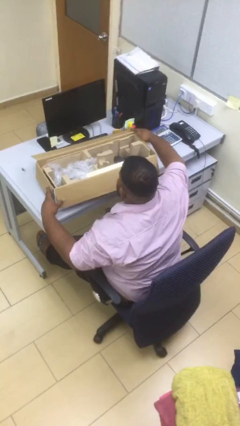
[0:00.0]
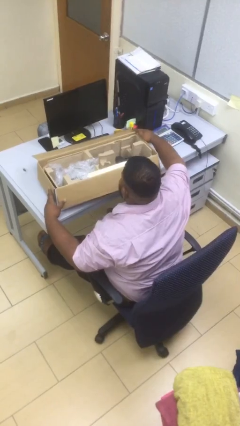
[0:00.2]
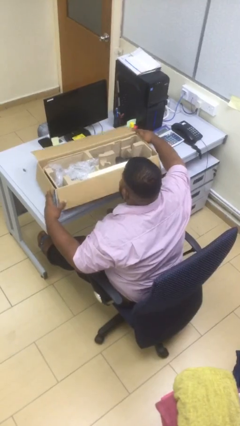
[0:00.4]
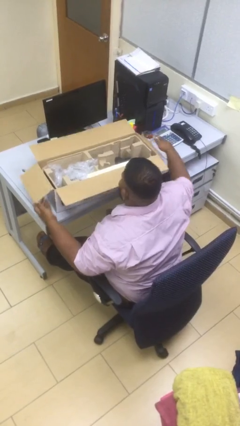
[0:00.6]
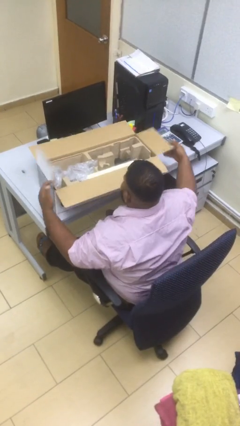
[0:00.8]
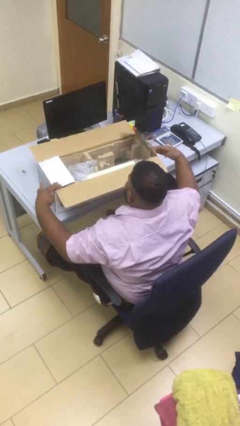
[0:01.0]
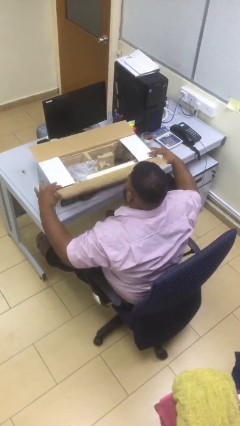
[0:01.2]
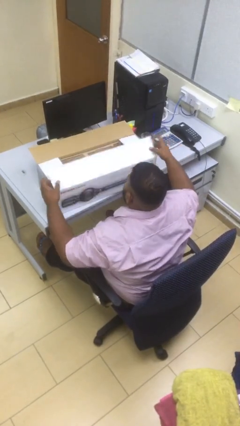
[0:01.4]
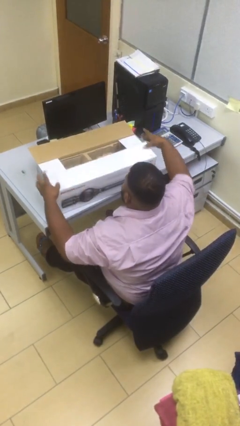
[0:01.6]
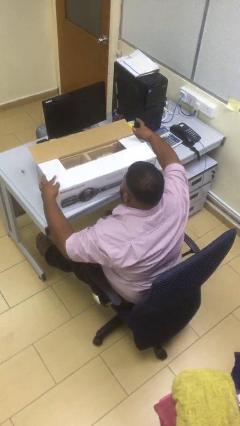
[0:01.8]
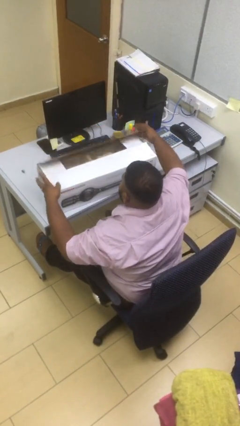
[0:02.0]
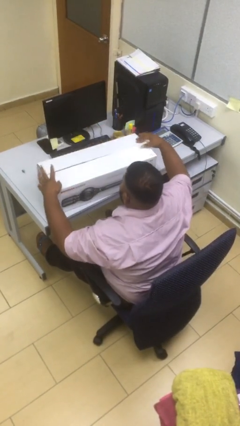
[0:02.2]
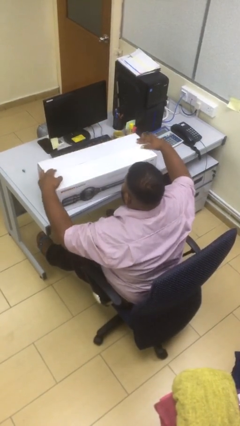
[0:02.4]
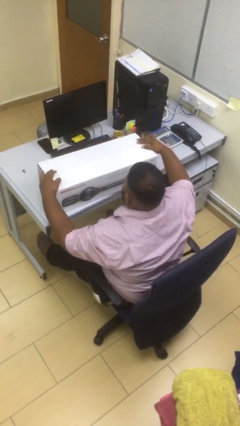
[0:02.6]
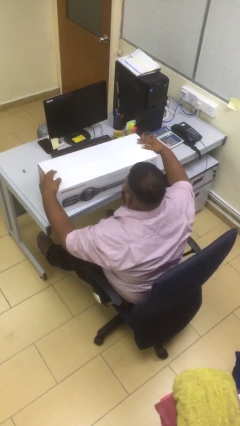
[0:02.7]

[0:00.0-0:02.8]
person closes box

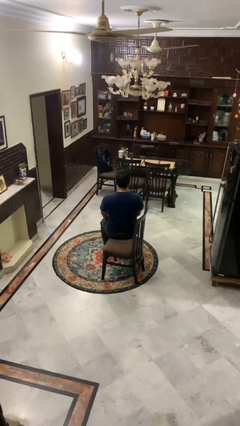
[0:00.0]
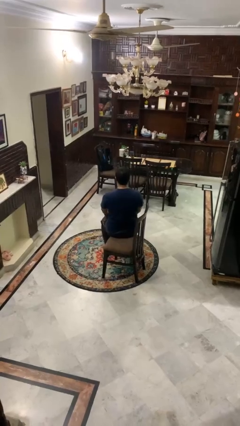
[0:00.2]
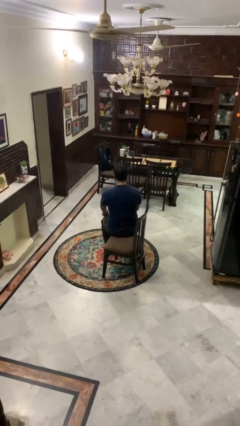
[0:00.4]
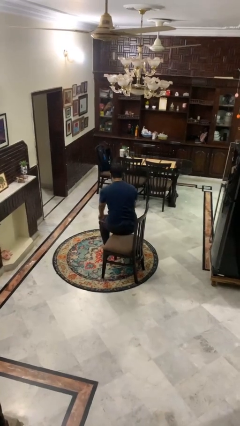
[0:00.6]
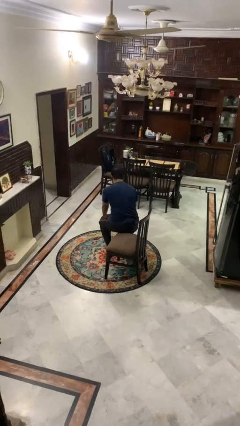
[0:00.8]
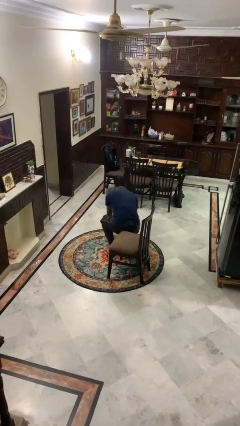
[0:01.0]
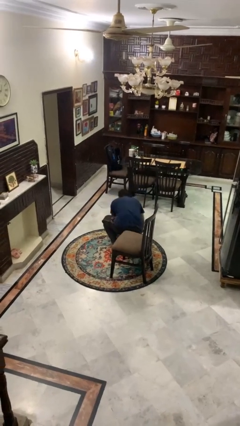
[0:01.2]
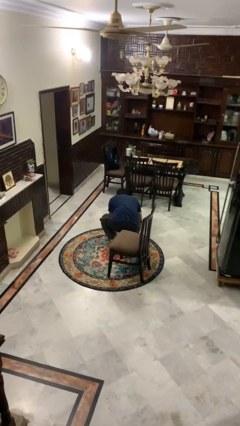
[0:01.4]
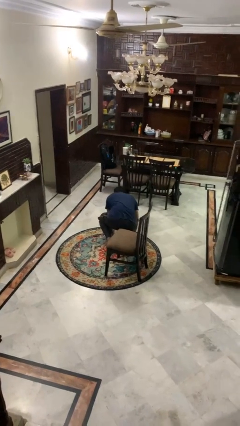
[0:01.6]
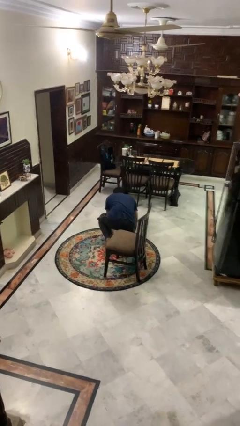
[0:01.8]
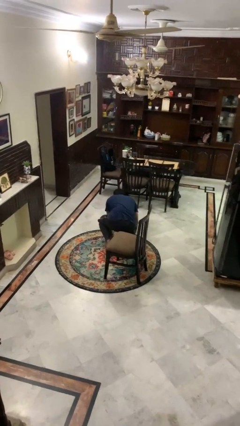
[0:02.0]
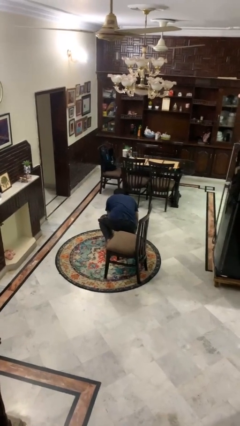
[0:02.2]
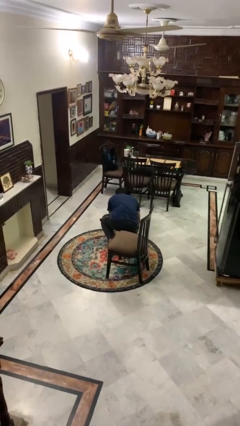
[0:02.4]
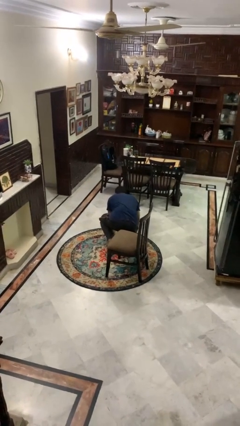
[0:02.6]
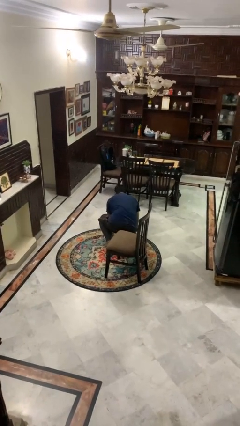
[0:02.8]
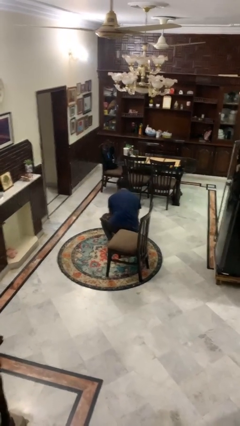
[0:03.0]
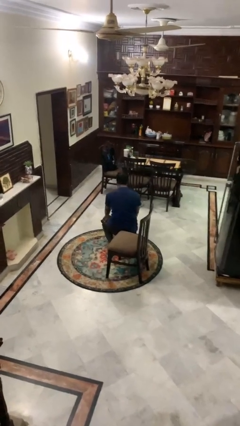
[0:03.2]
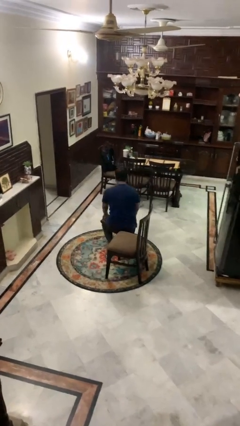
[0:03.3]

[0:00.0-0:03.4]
person falls from chair

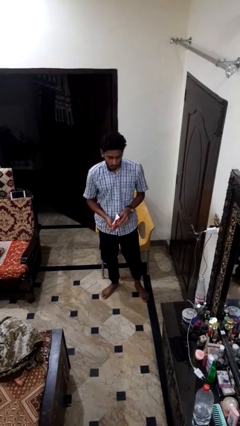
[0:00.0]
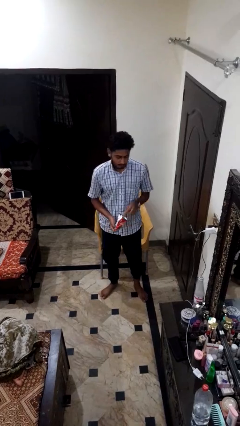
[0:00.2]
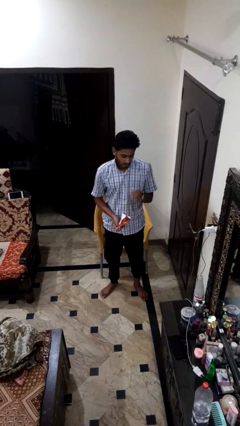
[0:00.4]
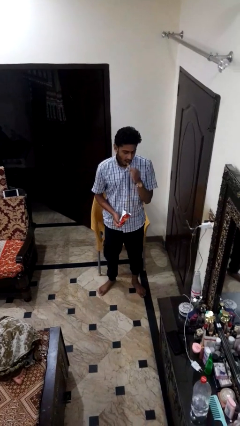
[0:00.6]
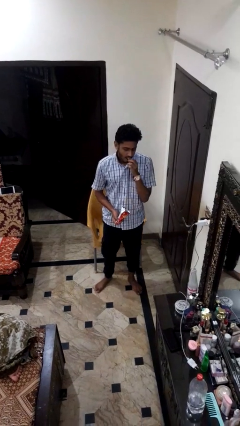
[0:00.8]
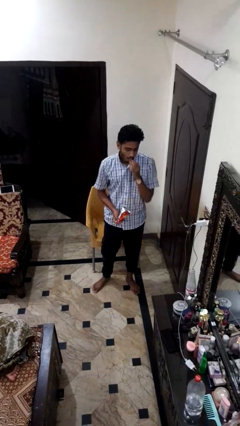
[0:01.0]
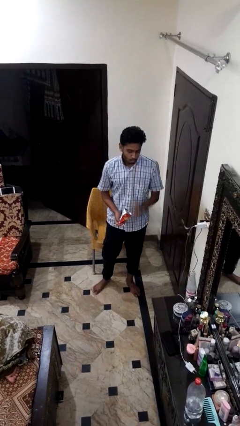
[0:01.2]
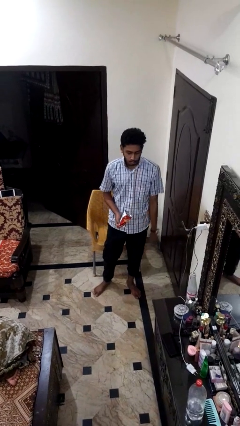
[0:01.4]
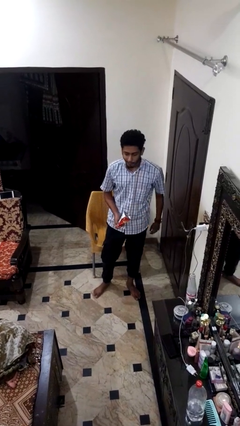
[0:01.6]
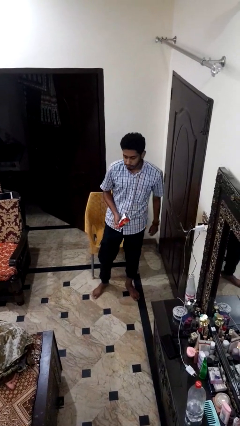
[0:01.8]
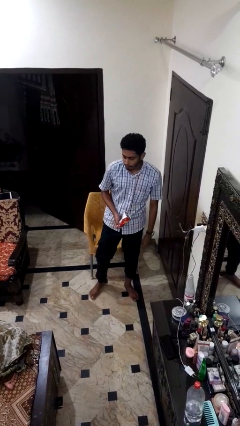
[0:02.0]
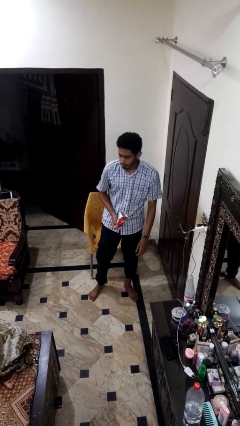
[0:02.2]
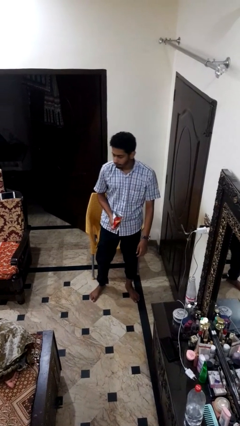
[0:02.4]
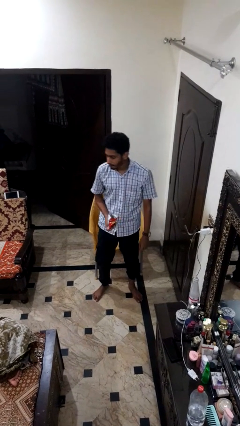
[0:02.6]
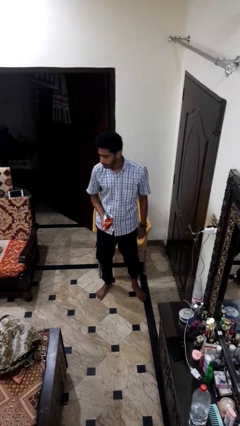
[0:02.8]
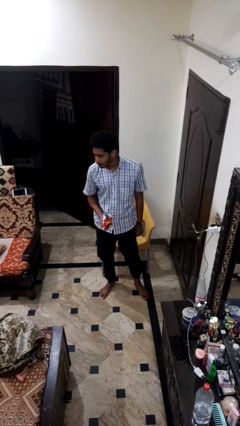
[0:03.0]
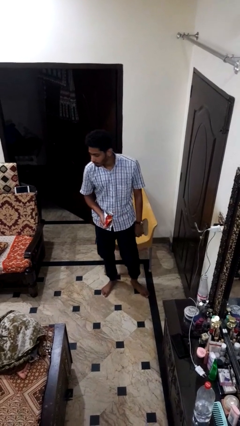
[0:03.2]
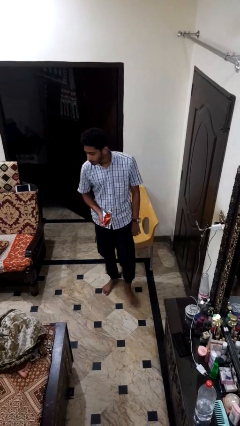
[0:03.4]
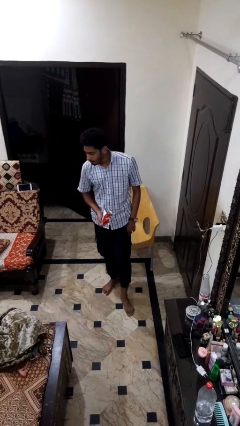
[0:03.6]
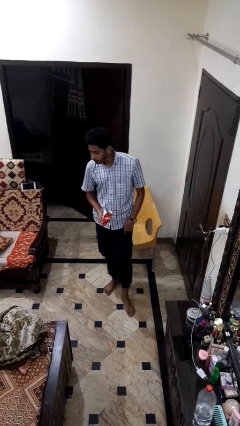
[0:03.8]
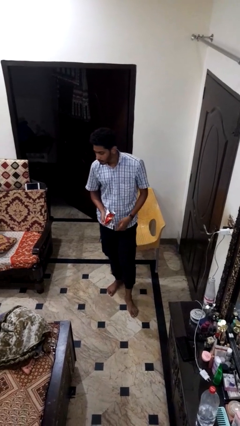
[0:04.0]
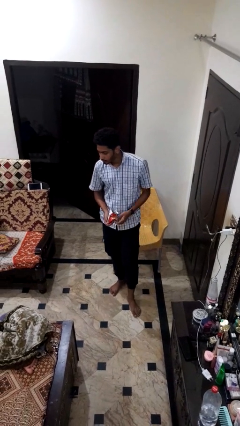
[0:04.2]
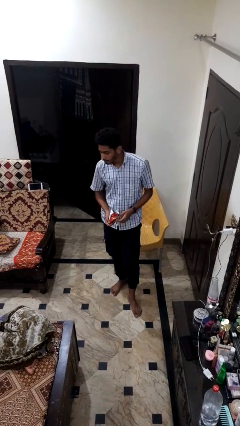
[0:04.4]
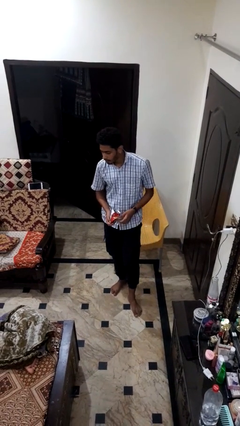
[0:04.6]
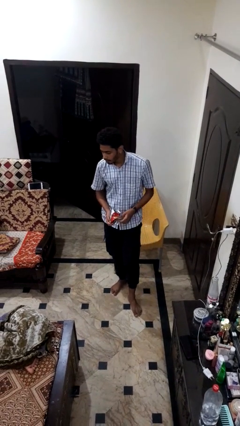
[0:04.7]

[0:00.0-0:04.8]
person eats snack from bag

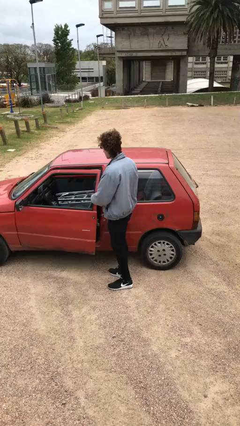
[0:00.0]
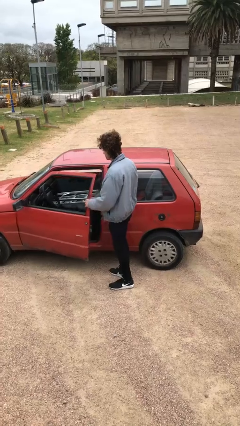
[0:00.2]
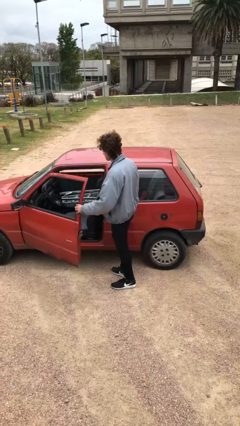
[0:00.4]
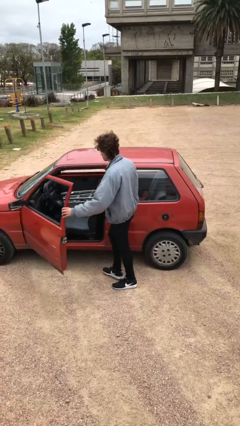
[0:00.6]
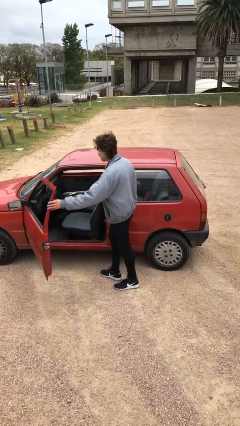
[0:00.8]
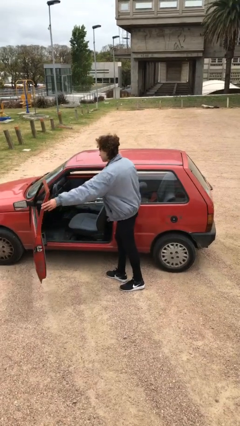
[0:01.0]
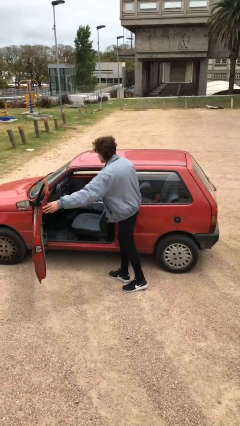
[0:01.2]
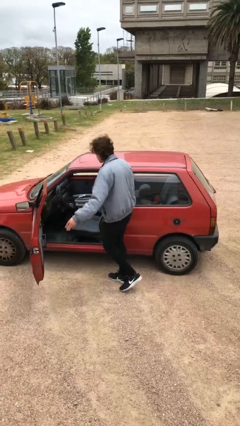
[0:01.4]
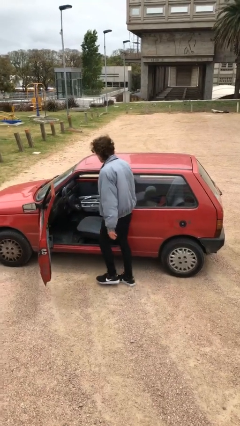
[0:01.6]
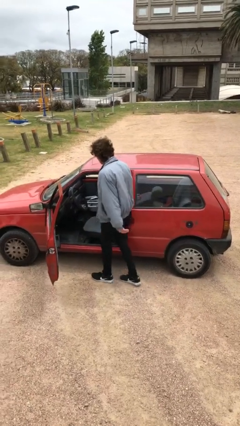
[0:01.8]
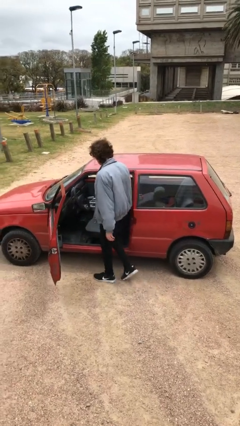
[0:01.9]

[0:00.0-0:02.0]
person opens car door

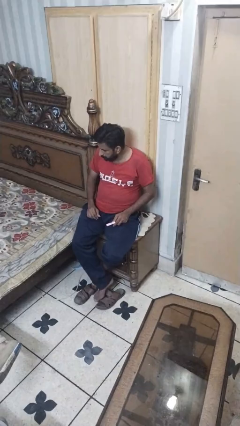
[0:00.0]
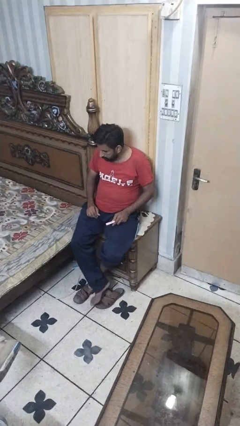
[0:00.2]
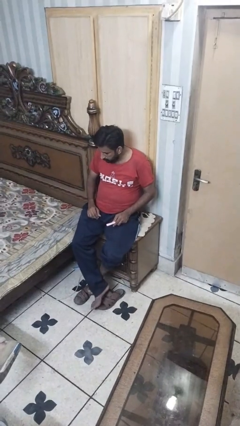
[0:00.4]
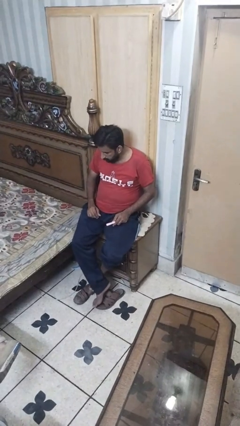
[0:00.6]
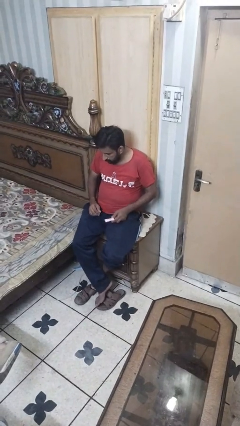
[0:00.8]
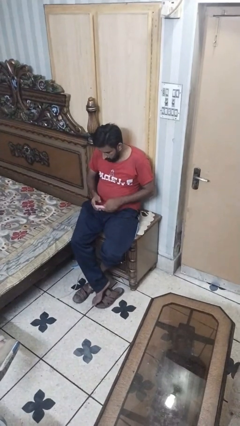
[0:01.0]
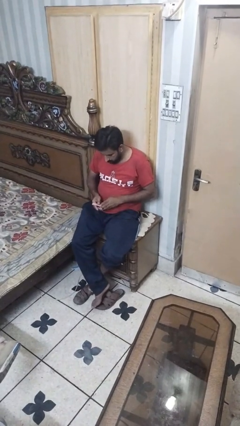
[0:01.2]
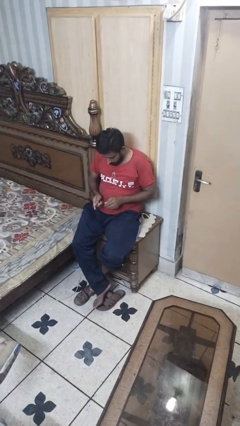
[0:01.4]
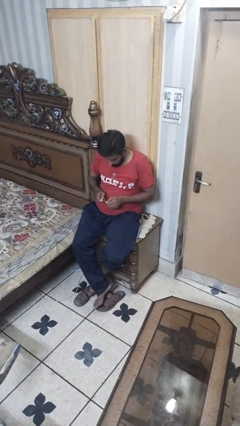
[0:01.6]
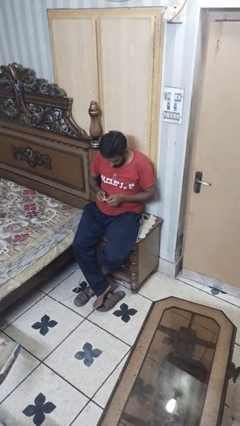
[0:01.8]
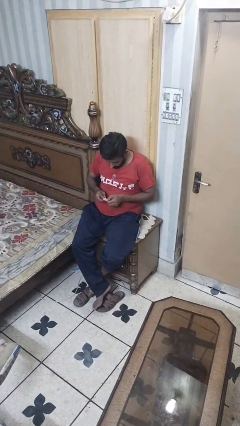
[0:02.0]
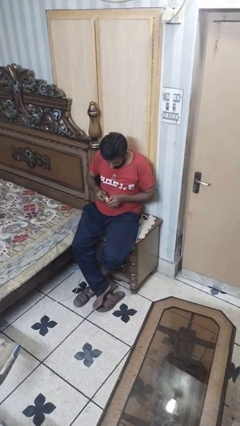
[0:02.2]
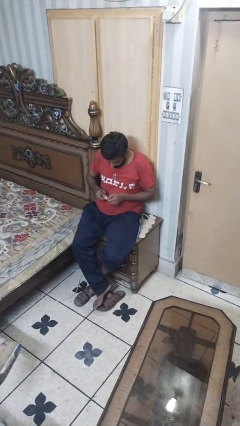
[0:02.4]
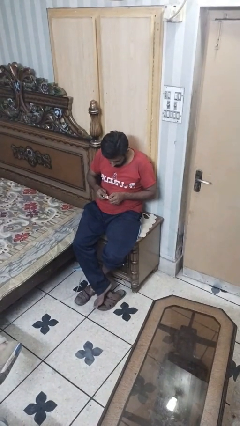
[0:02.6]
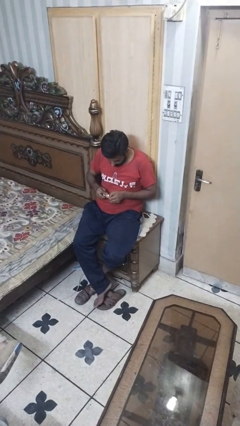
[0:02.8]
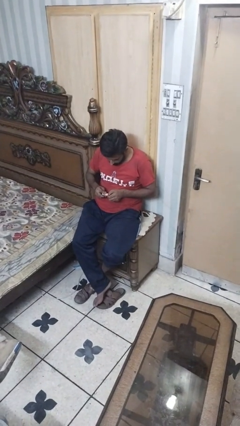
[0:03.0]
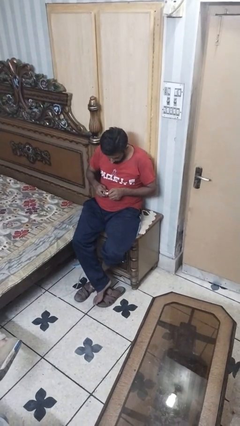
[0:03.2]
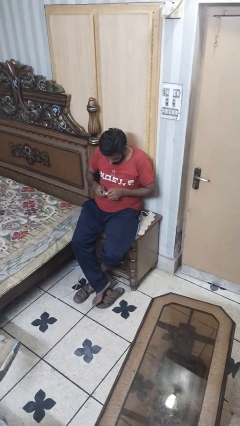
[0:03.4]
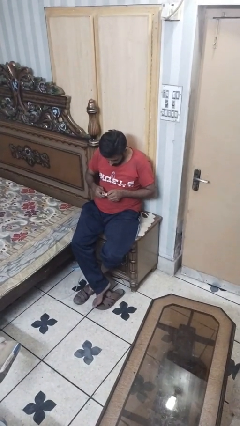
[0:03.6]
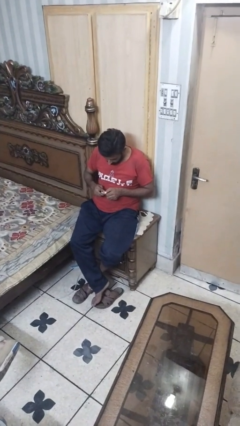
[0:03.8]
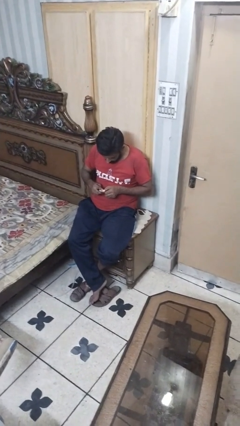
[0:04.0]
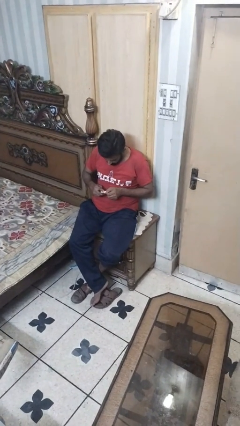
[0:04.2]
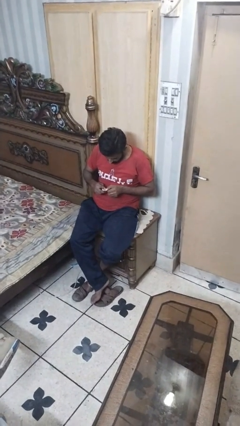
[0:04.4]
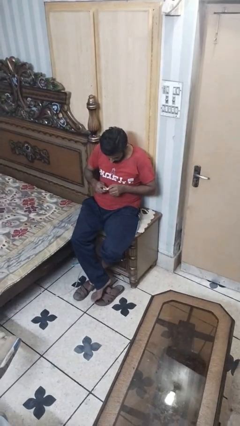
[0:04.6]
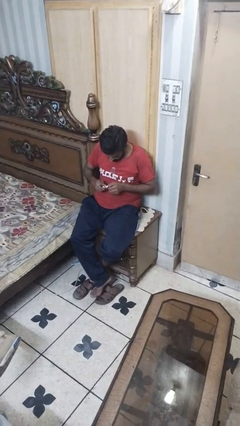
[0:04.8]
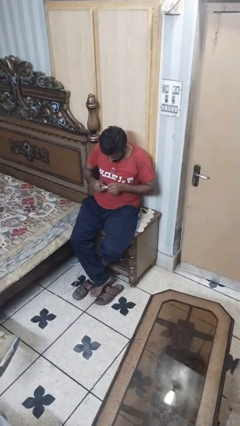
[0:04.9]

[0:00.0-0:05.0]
person files fingernails
